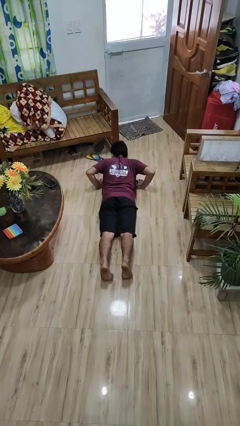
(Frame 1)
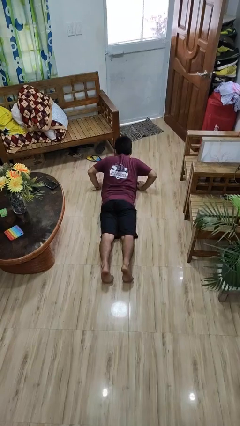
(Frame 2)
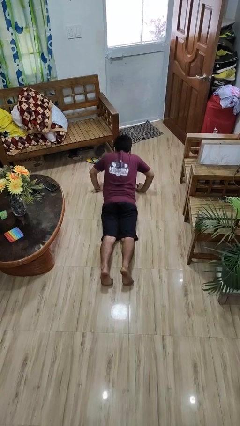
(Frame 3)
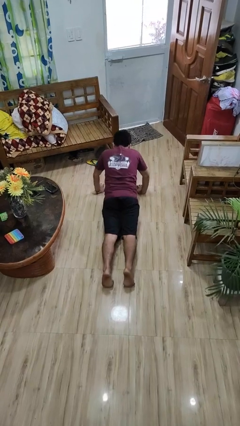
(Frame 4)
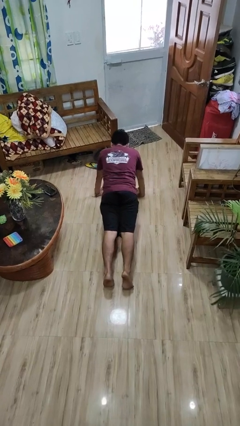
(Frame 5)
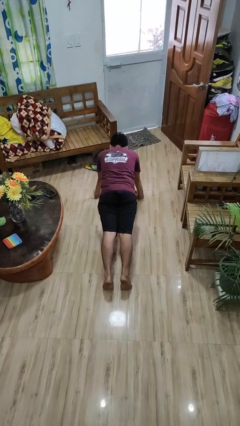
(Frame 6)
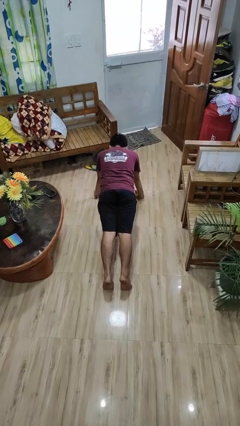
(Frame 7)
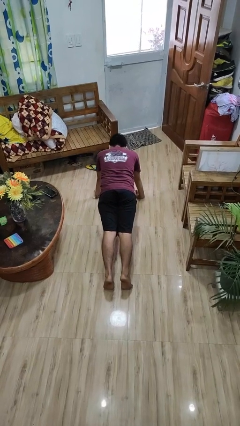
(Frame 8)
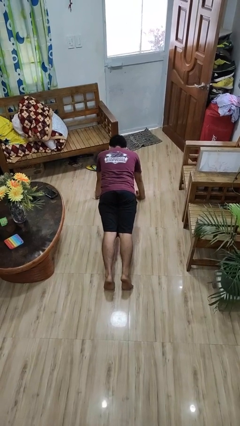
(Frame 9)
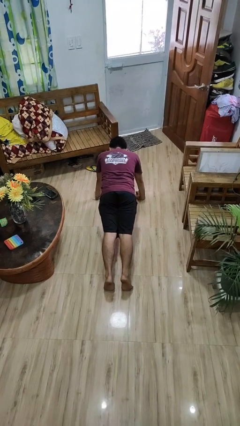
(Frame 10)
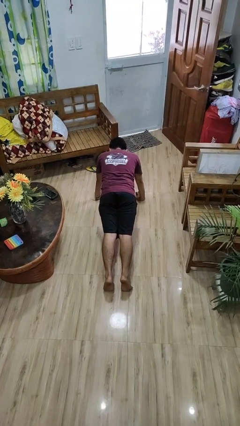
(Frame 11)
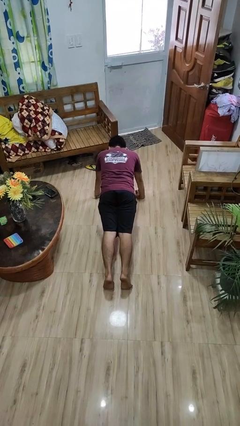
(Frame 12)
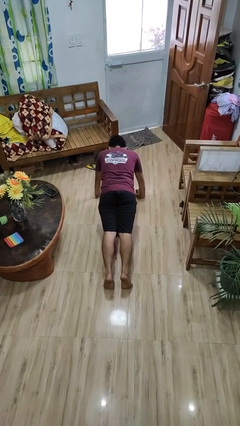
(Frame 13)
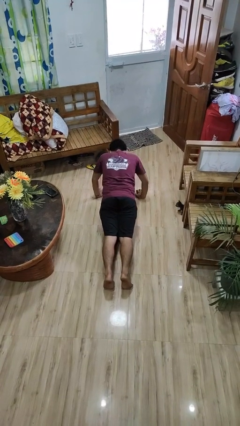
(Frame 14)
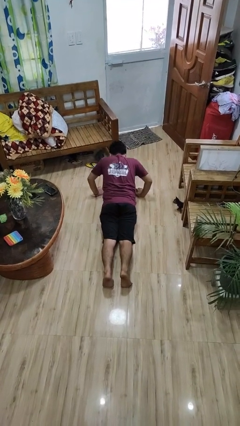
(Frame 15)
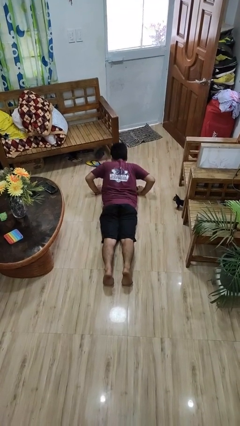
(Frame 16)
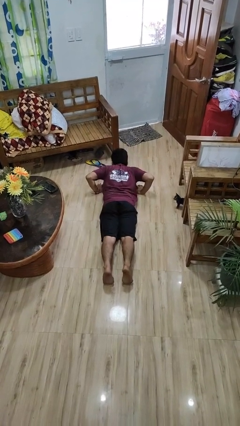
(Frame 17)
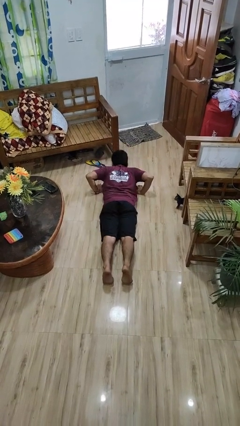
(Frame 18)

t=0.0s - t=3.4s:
person exercises with pushup

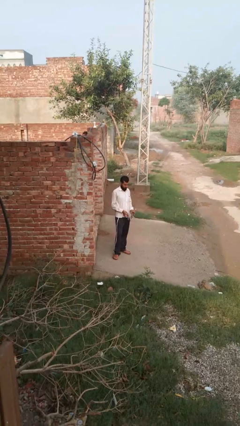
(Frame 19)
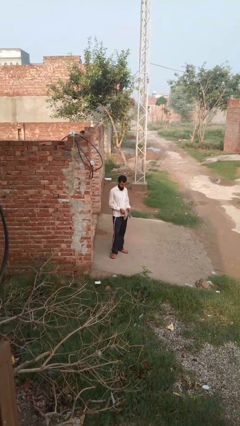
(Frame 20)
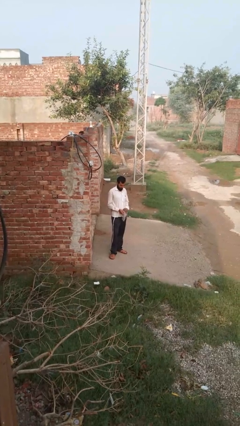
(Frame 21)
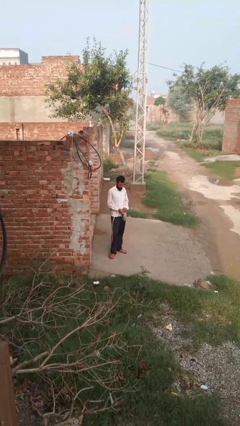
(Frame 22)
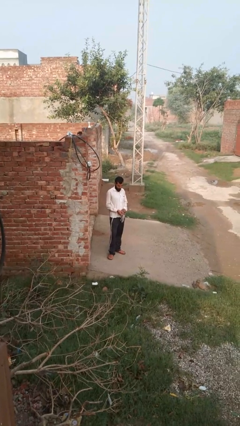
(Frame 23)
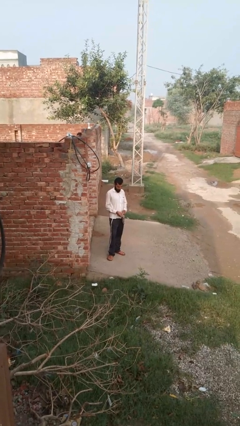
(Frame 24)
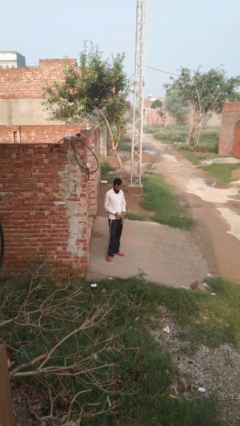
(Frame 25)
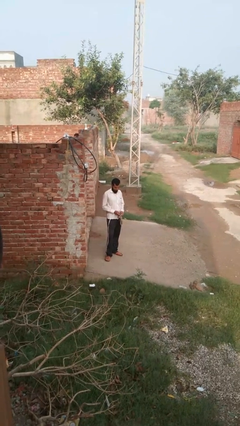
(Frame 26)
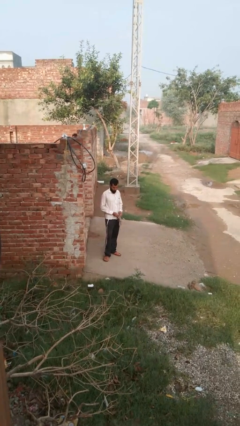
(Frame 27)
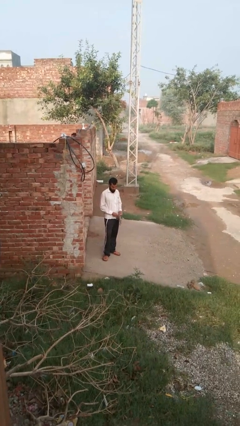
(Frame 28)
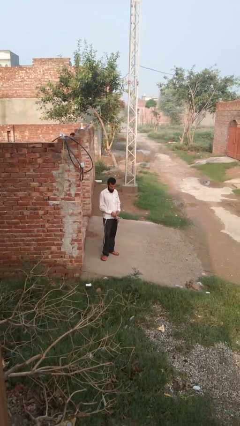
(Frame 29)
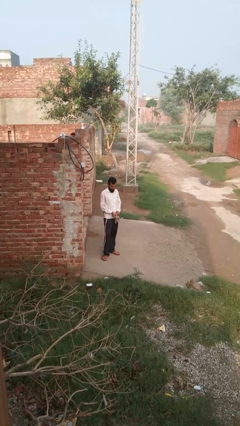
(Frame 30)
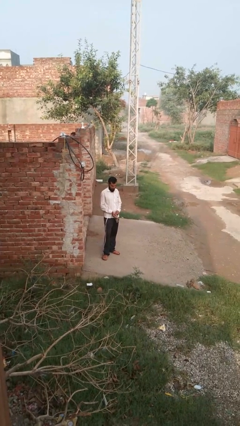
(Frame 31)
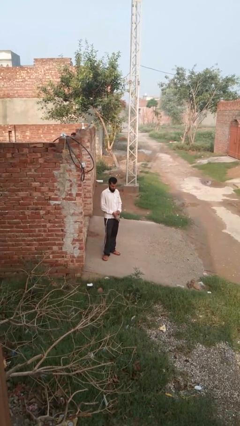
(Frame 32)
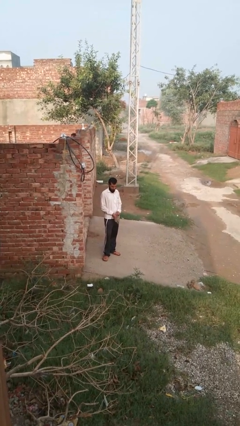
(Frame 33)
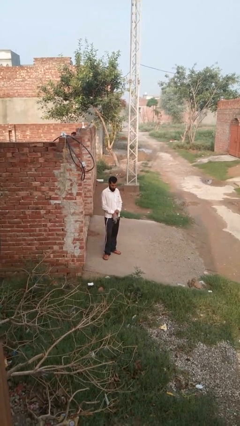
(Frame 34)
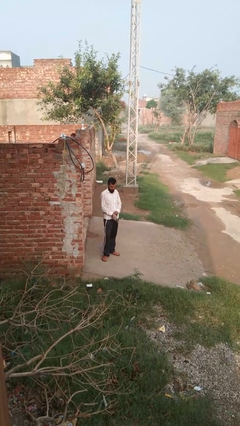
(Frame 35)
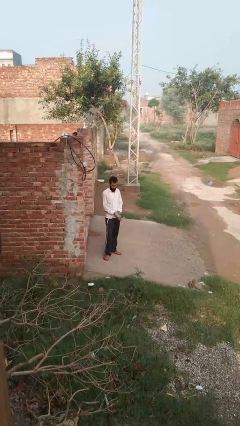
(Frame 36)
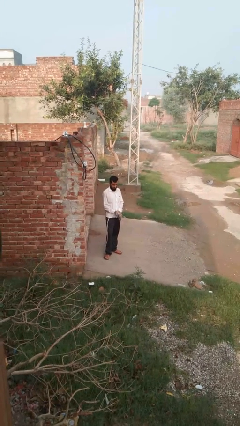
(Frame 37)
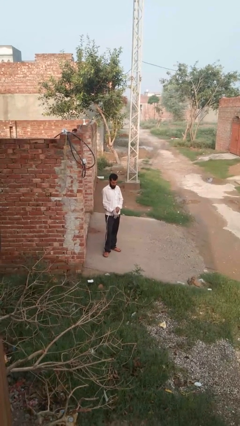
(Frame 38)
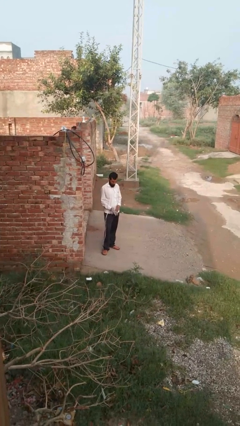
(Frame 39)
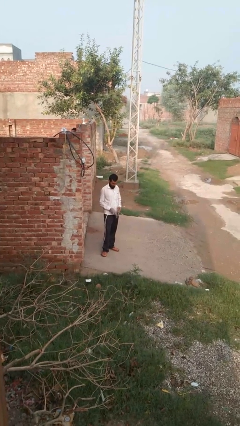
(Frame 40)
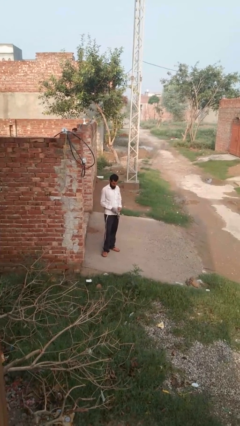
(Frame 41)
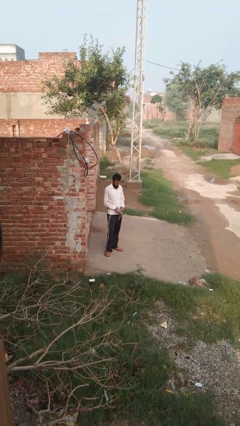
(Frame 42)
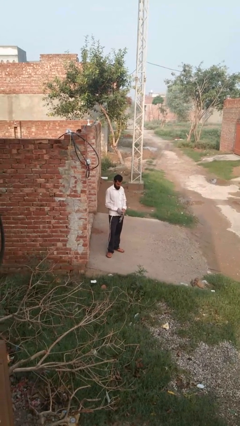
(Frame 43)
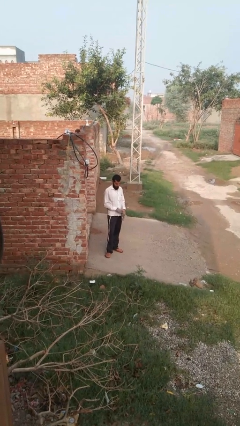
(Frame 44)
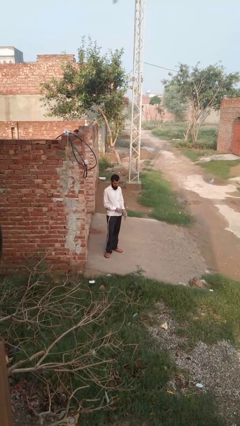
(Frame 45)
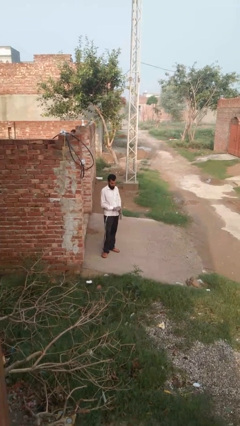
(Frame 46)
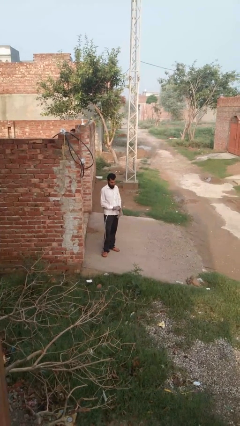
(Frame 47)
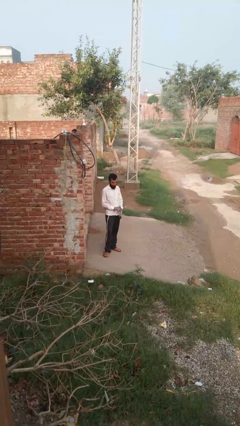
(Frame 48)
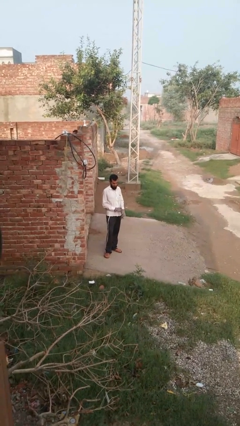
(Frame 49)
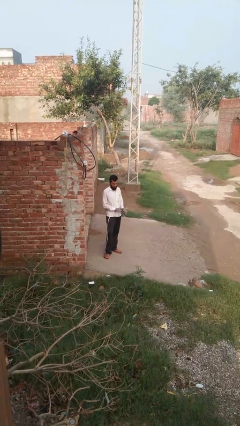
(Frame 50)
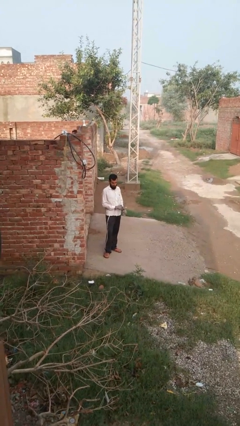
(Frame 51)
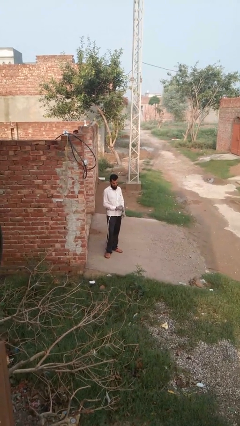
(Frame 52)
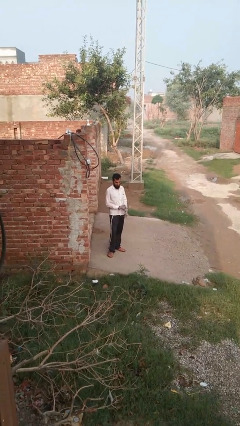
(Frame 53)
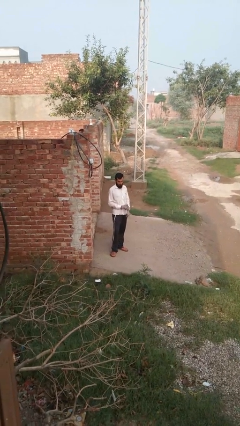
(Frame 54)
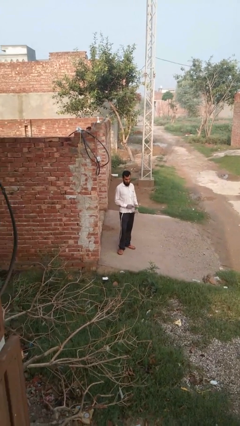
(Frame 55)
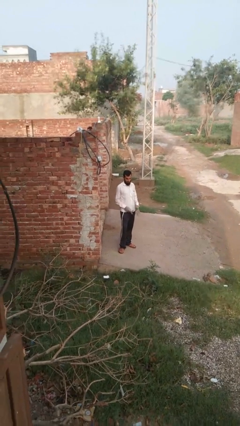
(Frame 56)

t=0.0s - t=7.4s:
person puts on gloves

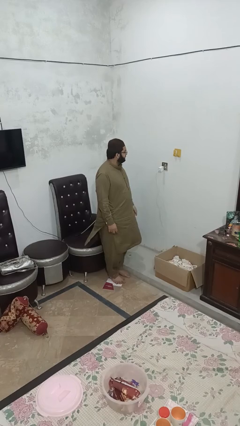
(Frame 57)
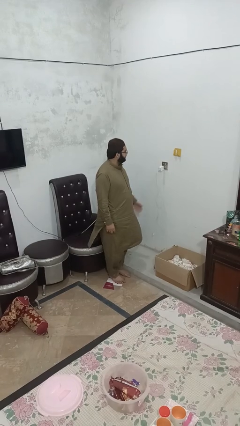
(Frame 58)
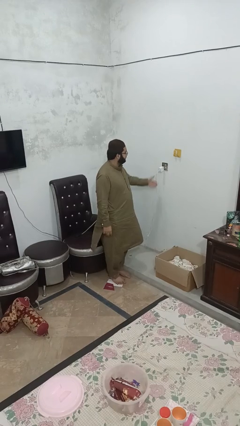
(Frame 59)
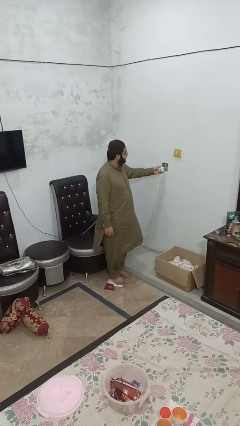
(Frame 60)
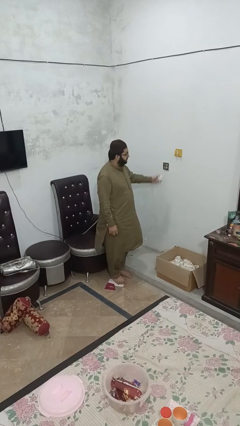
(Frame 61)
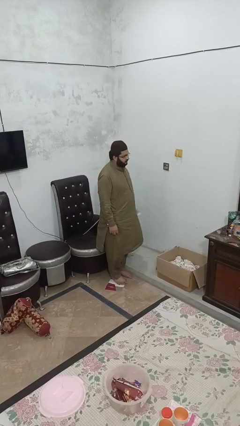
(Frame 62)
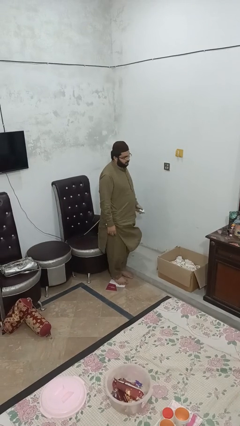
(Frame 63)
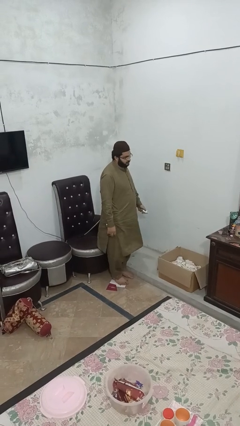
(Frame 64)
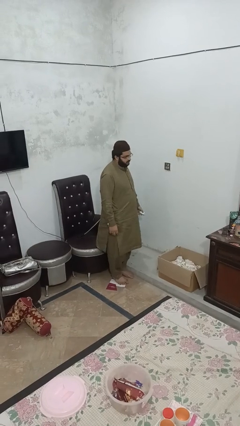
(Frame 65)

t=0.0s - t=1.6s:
person unplugs from electrical socket

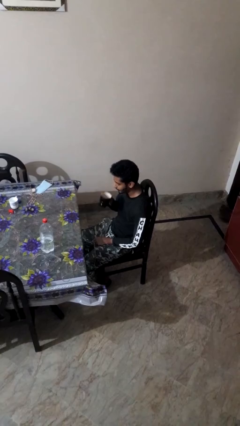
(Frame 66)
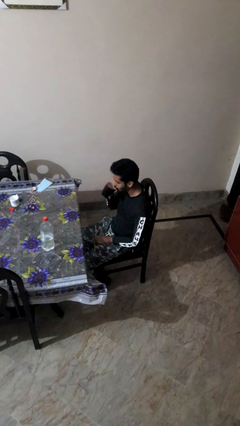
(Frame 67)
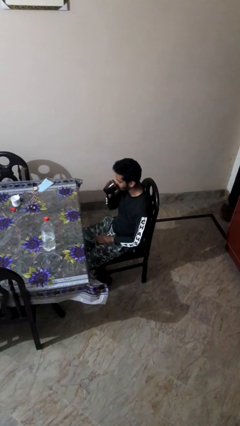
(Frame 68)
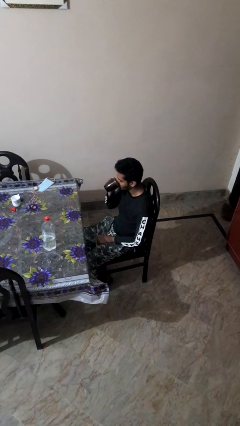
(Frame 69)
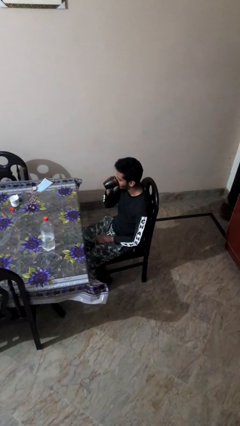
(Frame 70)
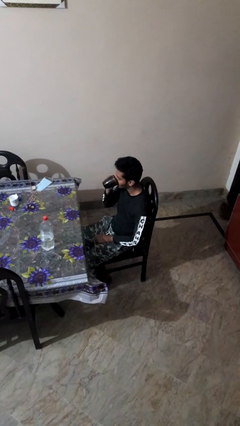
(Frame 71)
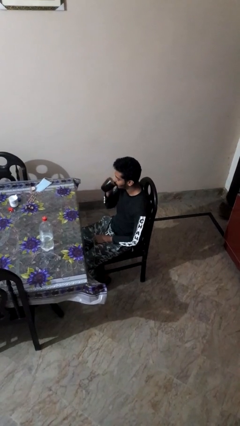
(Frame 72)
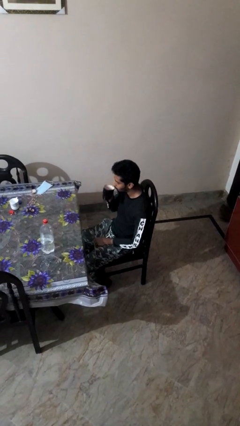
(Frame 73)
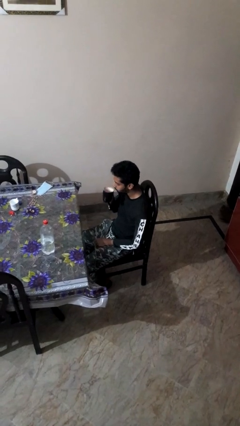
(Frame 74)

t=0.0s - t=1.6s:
person drinks from mug

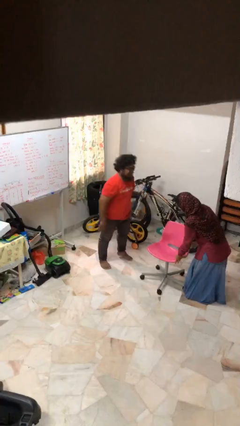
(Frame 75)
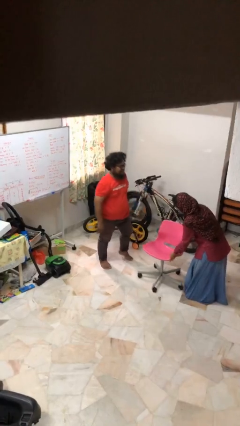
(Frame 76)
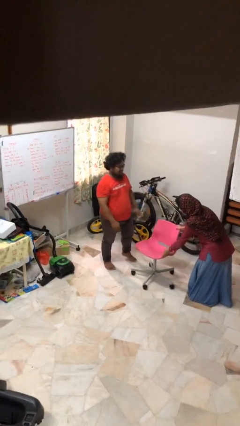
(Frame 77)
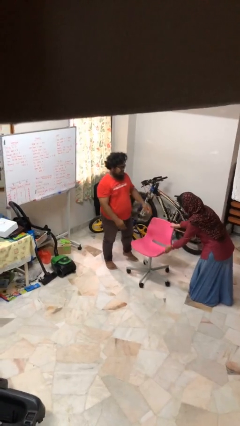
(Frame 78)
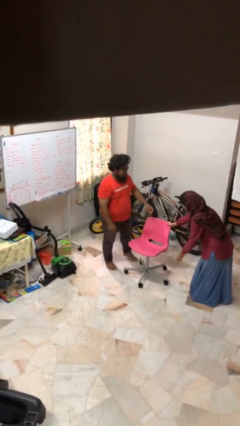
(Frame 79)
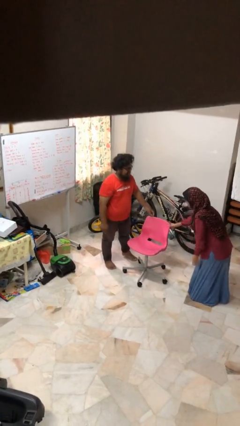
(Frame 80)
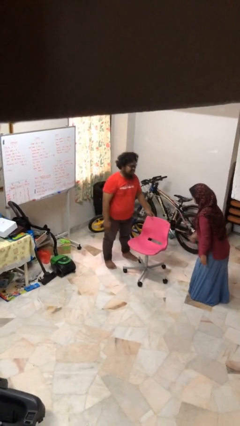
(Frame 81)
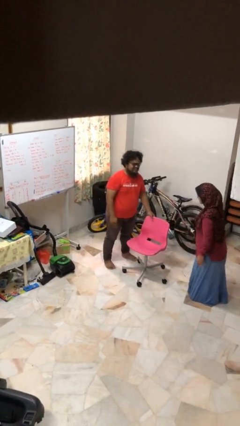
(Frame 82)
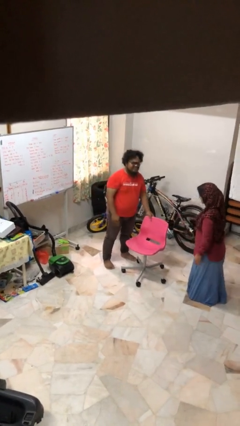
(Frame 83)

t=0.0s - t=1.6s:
person transfers object to person

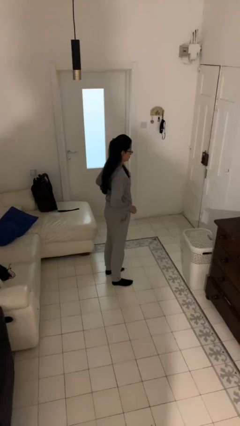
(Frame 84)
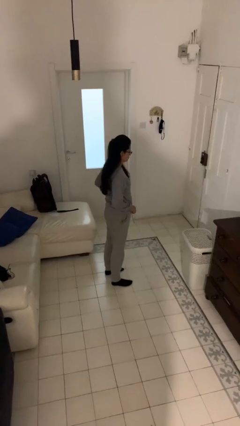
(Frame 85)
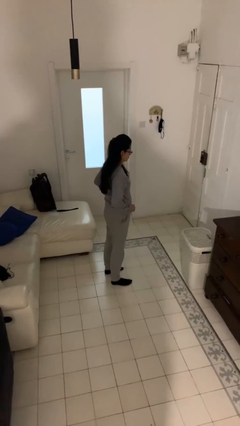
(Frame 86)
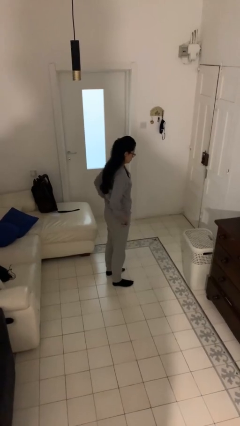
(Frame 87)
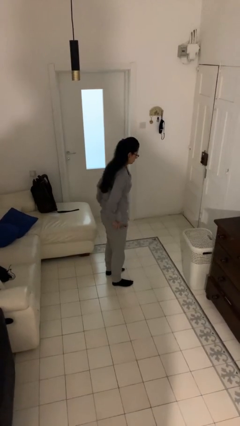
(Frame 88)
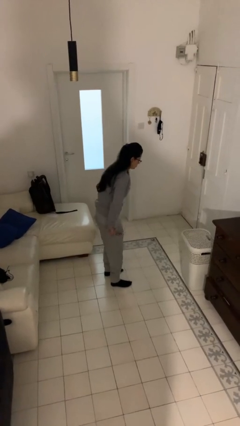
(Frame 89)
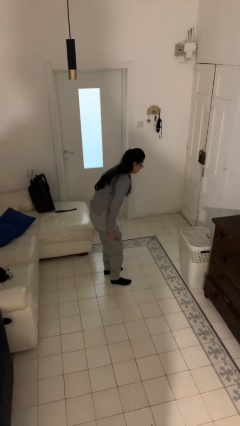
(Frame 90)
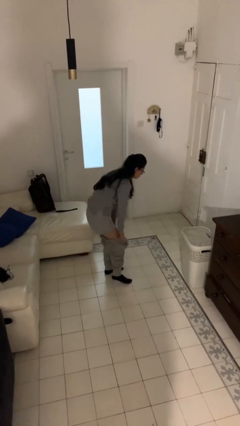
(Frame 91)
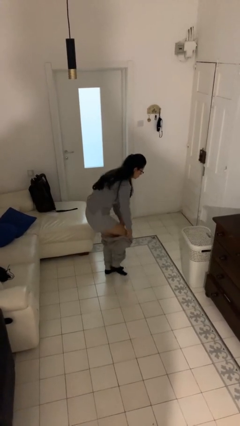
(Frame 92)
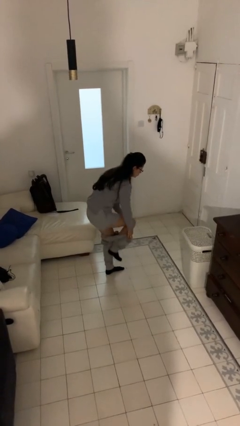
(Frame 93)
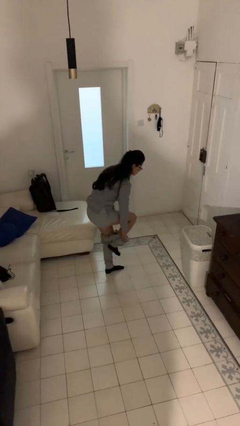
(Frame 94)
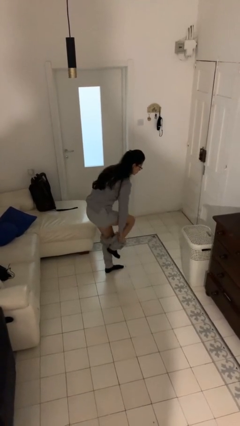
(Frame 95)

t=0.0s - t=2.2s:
person takes off pants
